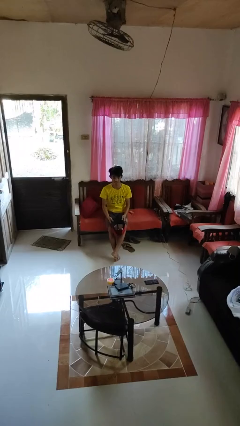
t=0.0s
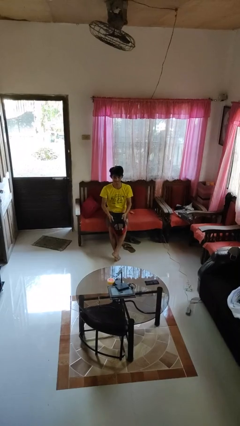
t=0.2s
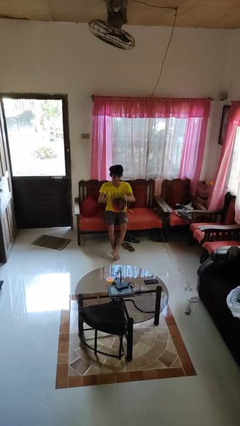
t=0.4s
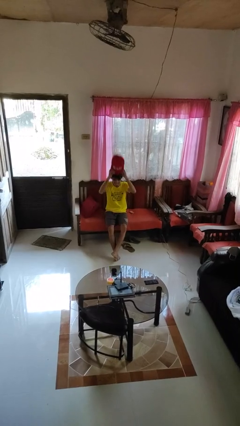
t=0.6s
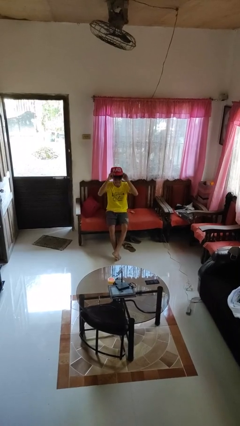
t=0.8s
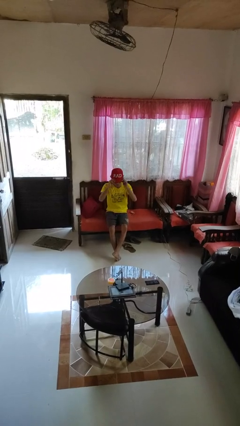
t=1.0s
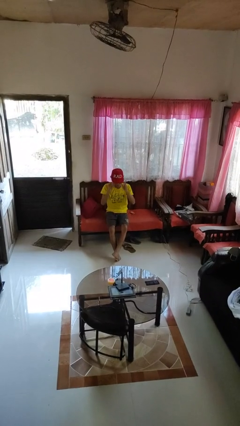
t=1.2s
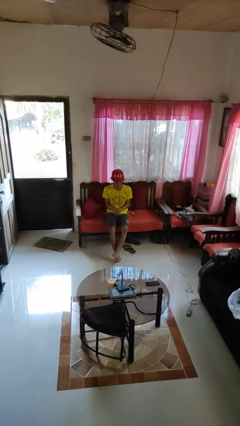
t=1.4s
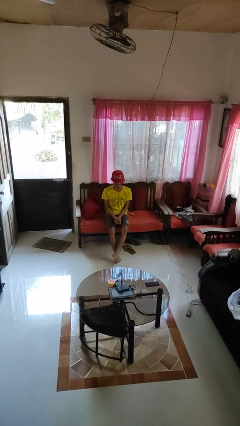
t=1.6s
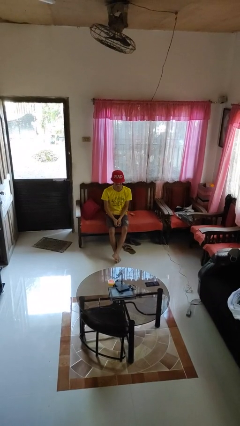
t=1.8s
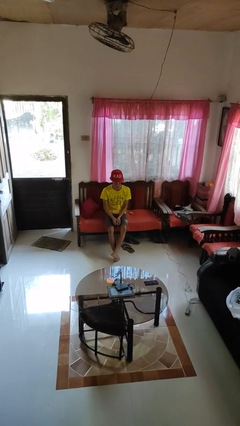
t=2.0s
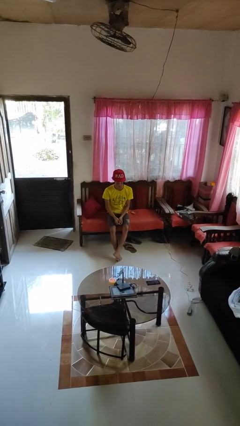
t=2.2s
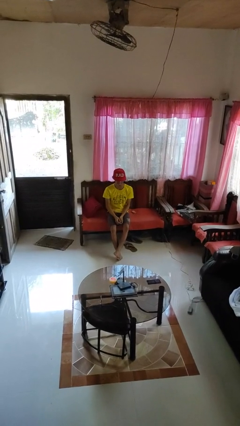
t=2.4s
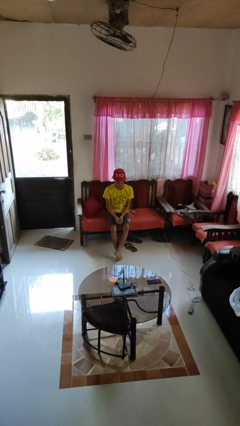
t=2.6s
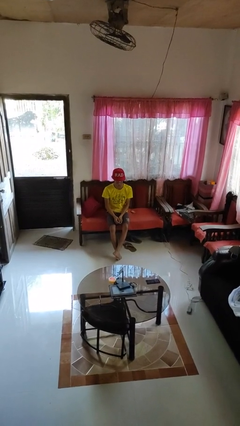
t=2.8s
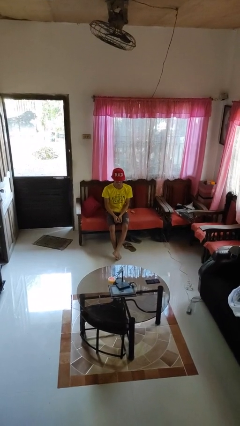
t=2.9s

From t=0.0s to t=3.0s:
person puts on hat

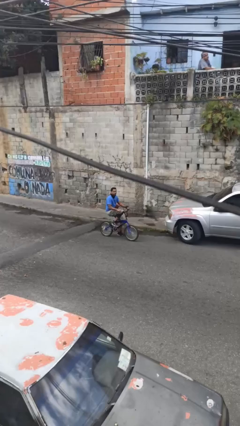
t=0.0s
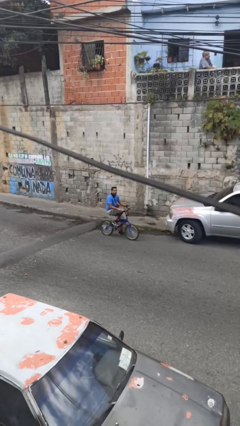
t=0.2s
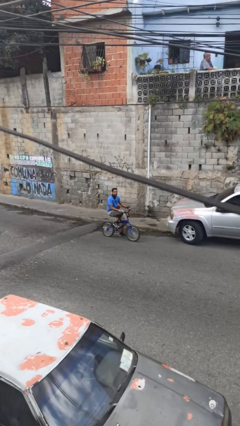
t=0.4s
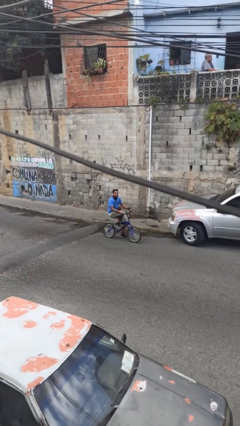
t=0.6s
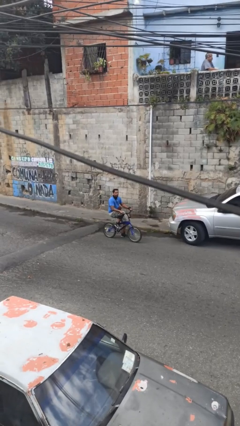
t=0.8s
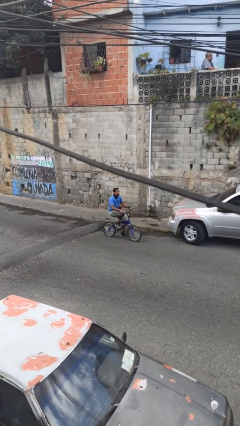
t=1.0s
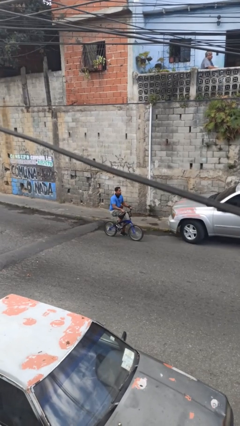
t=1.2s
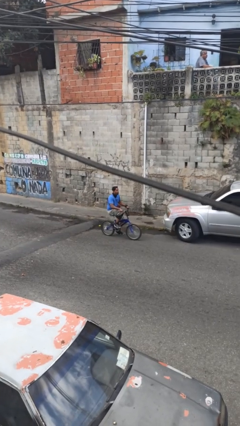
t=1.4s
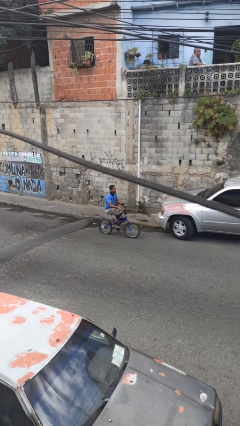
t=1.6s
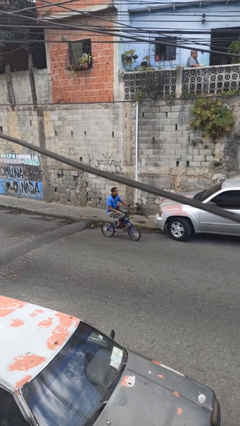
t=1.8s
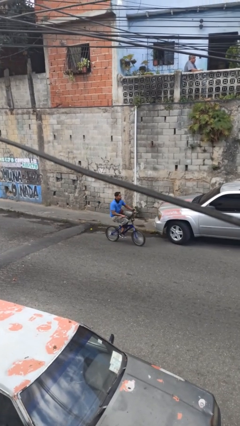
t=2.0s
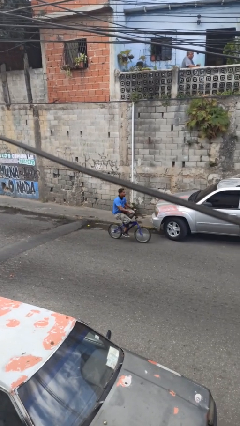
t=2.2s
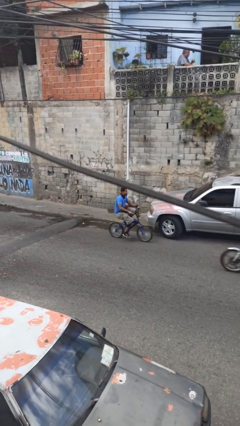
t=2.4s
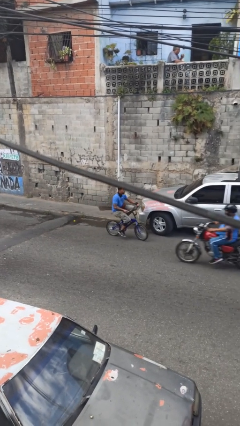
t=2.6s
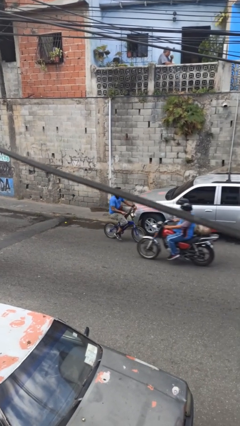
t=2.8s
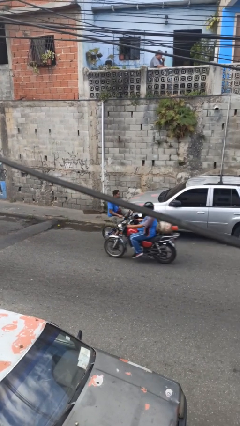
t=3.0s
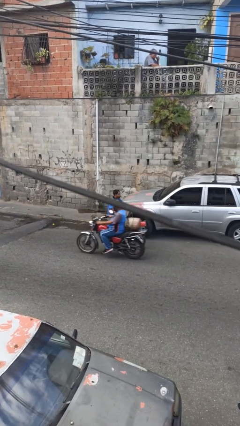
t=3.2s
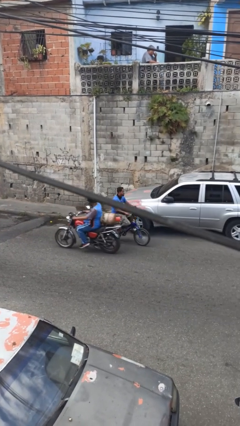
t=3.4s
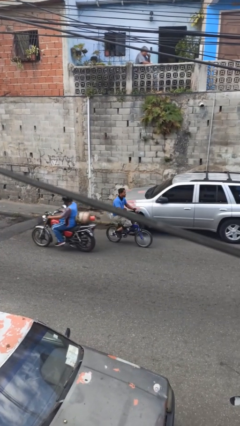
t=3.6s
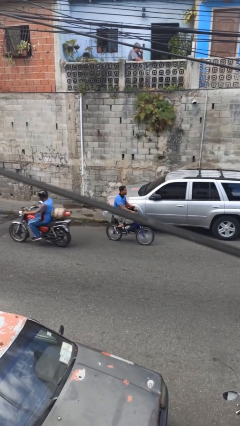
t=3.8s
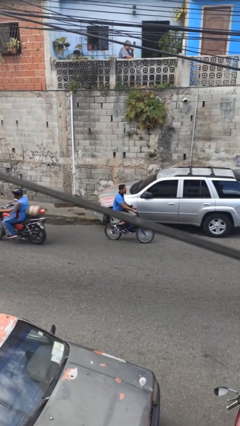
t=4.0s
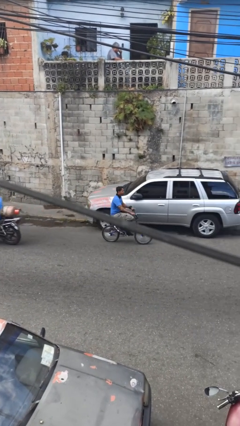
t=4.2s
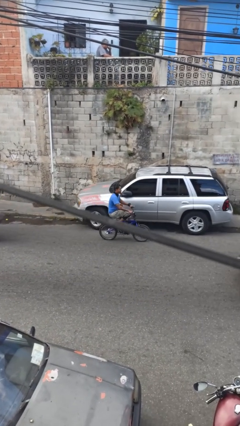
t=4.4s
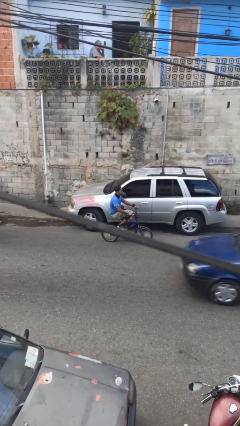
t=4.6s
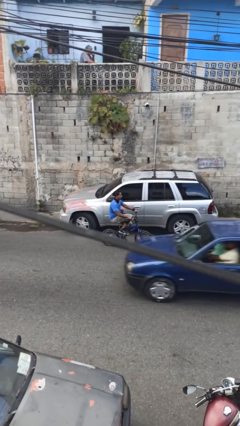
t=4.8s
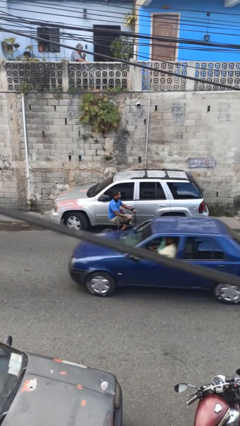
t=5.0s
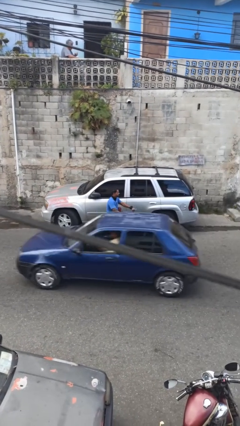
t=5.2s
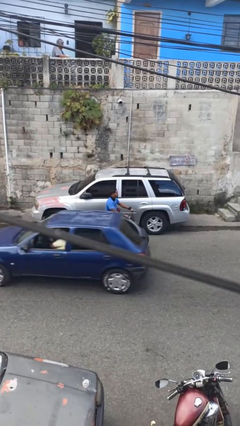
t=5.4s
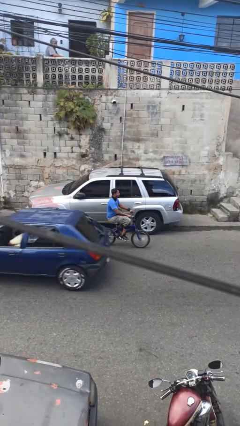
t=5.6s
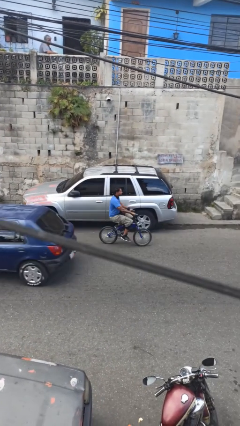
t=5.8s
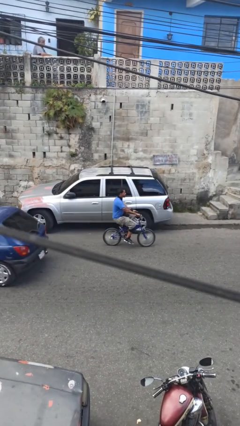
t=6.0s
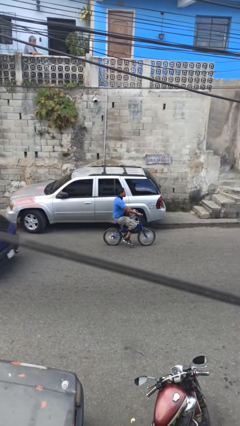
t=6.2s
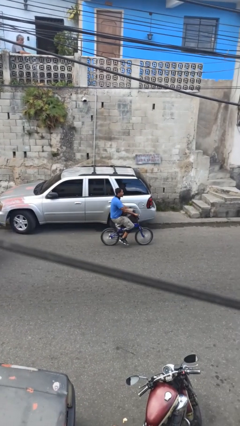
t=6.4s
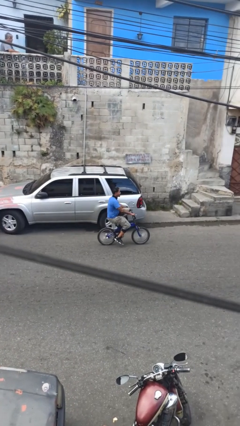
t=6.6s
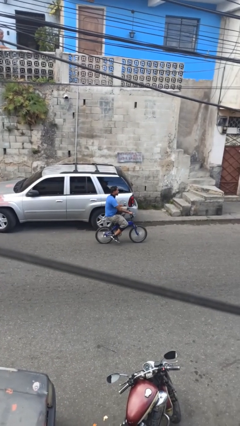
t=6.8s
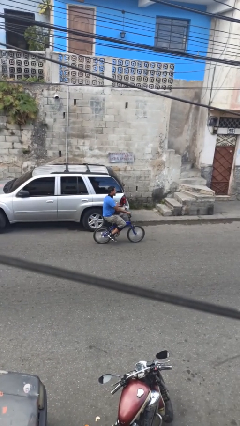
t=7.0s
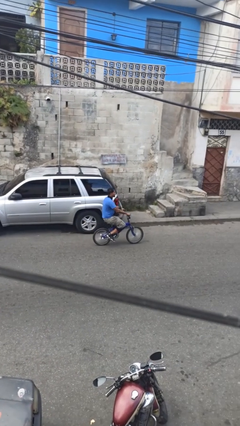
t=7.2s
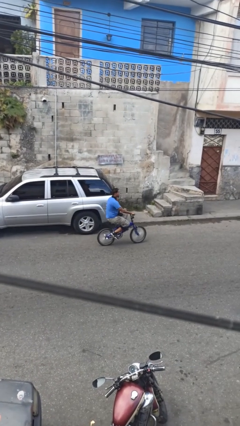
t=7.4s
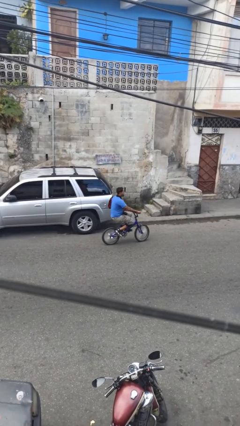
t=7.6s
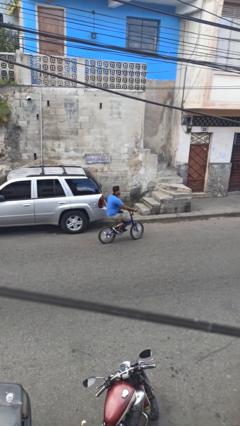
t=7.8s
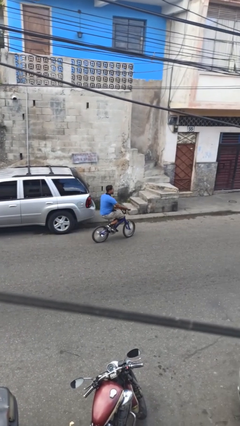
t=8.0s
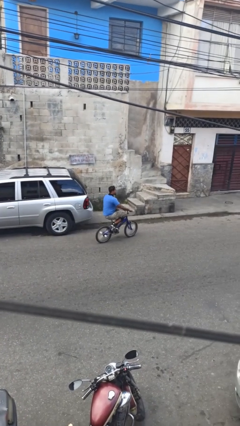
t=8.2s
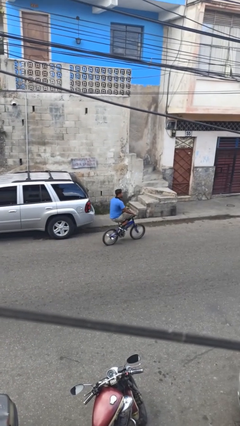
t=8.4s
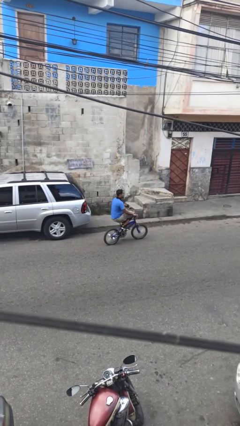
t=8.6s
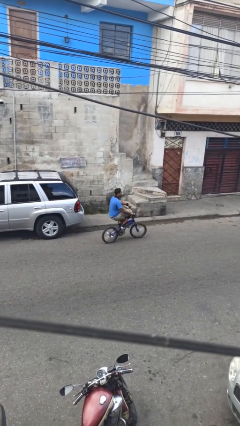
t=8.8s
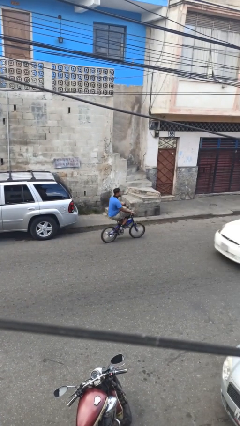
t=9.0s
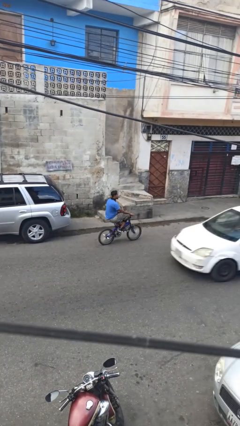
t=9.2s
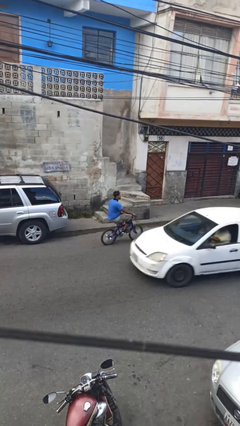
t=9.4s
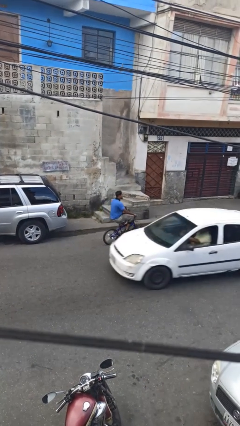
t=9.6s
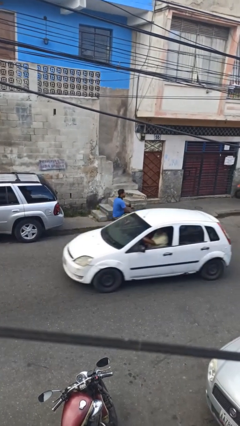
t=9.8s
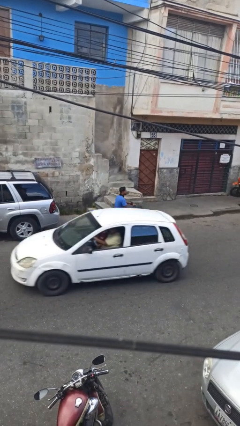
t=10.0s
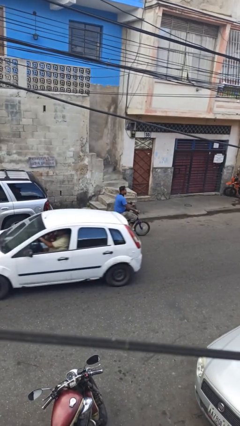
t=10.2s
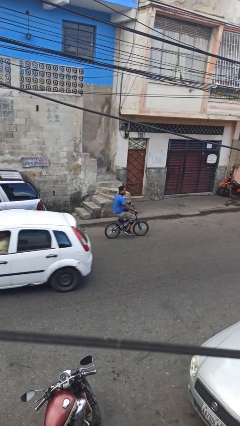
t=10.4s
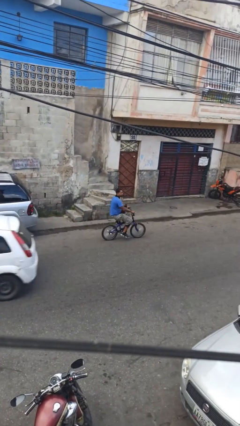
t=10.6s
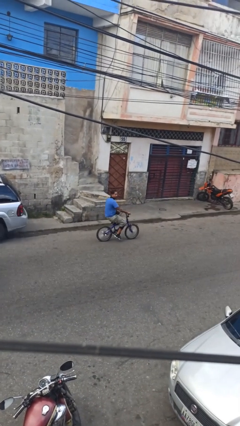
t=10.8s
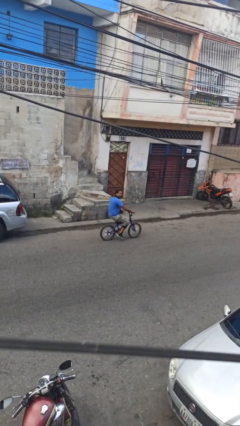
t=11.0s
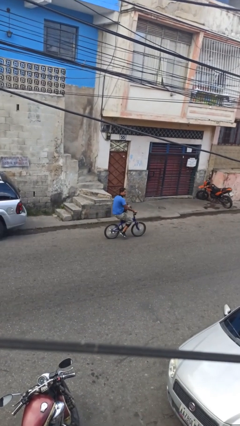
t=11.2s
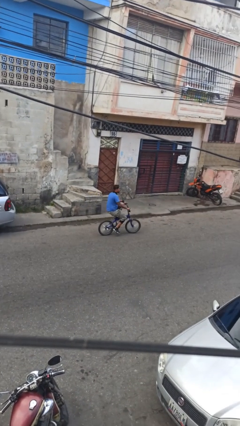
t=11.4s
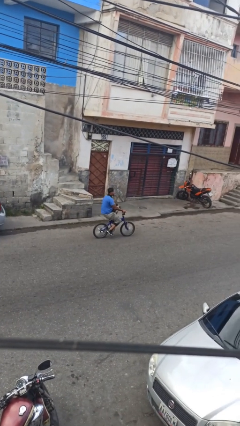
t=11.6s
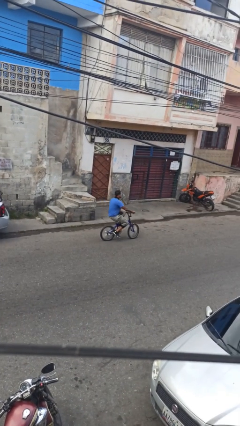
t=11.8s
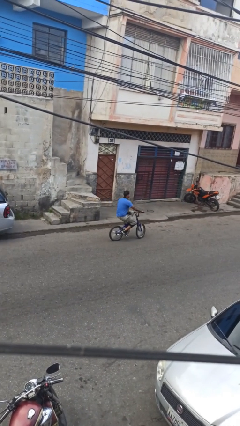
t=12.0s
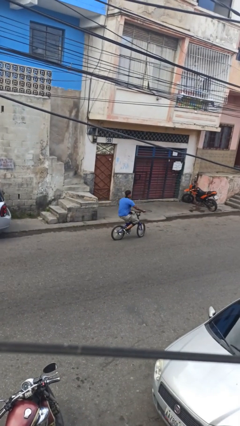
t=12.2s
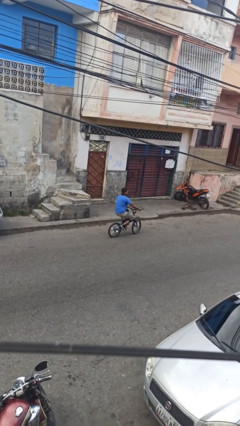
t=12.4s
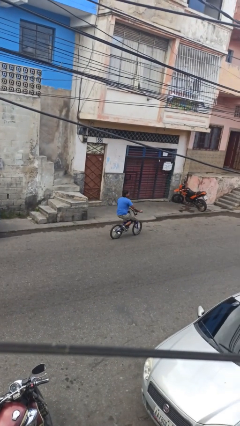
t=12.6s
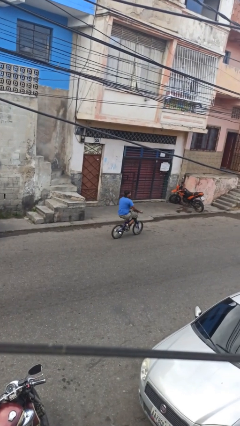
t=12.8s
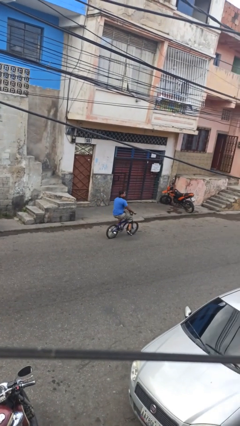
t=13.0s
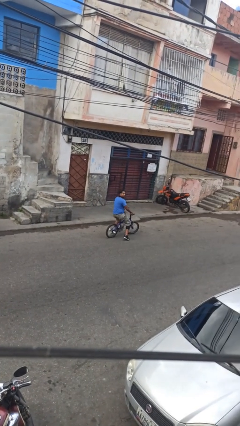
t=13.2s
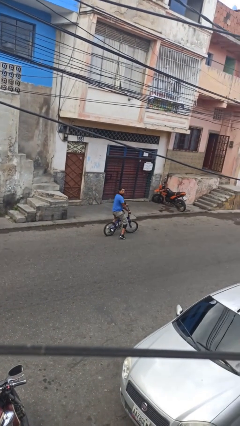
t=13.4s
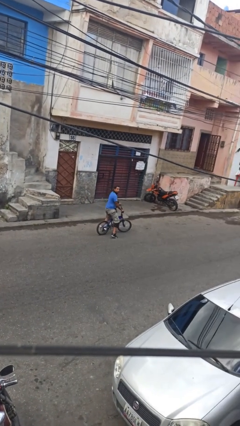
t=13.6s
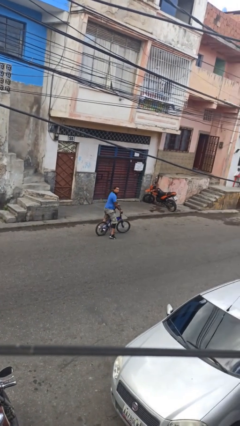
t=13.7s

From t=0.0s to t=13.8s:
person rides bicycle

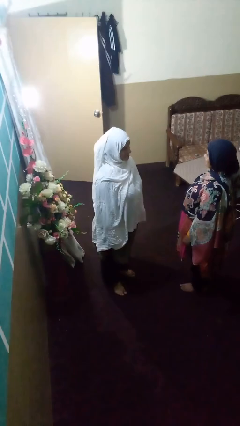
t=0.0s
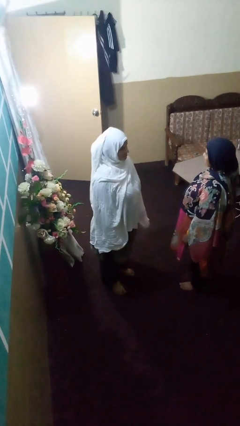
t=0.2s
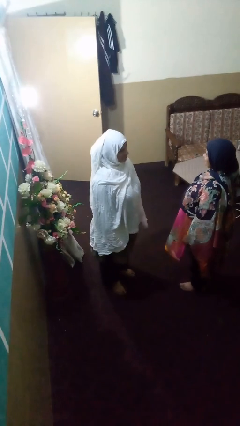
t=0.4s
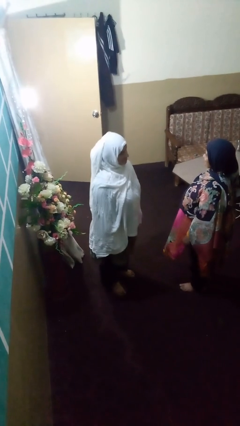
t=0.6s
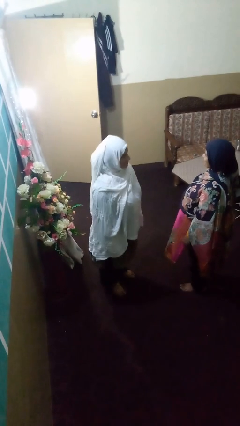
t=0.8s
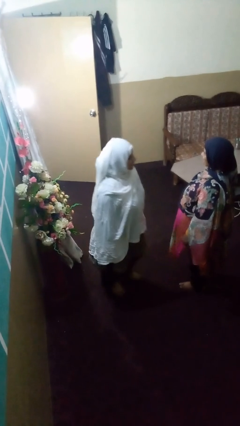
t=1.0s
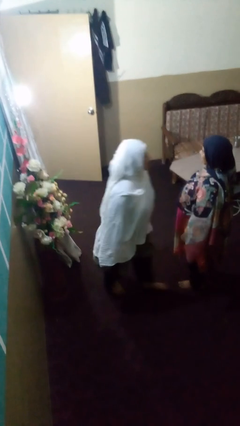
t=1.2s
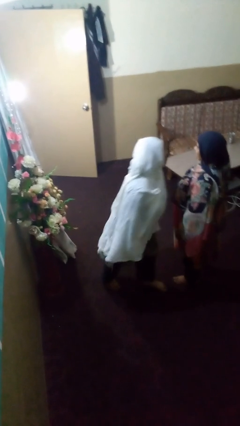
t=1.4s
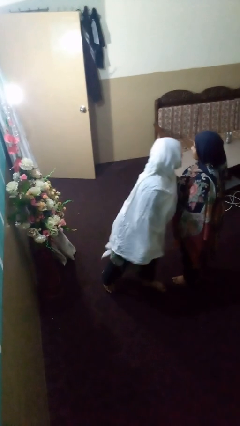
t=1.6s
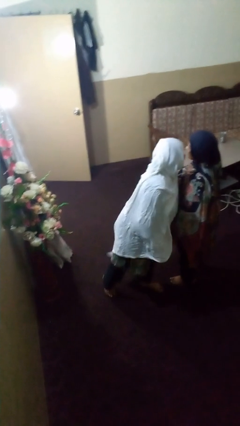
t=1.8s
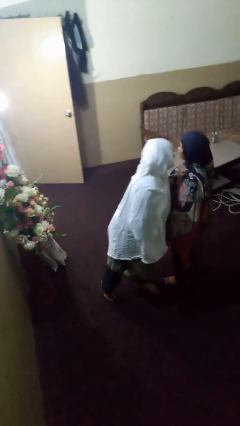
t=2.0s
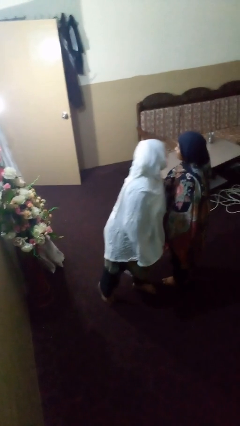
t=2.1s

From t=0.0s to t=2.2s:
person laughs with person
